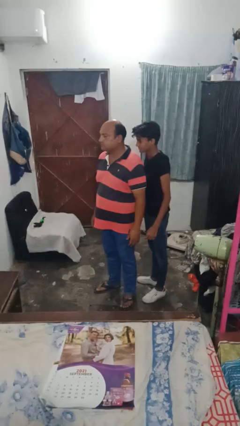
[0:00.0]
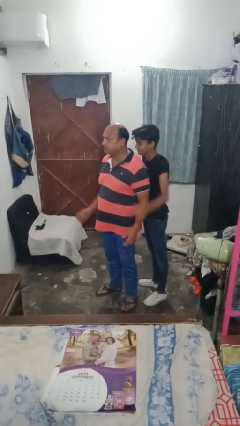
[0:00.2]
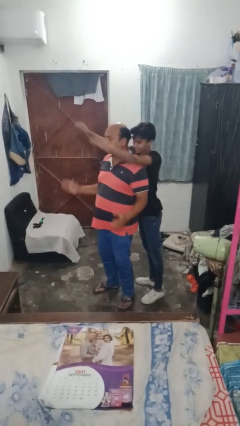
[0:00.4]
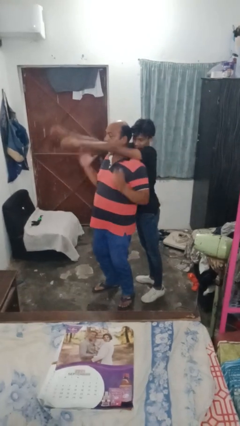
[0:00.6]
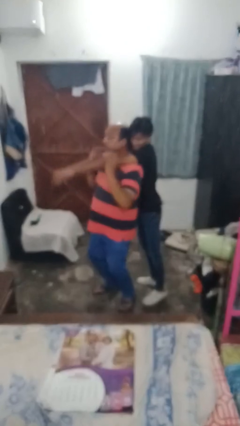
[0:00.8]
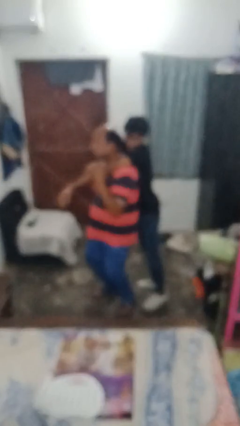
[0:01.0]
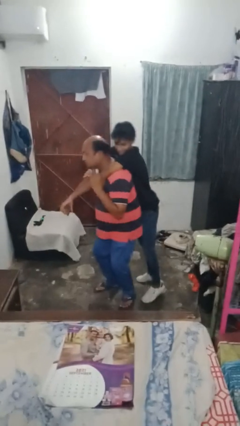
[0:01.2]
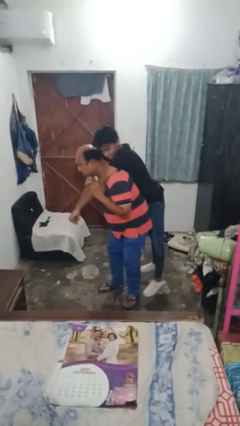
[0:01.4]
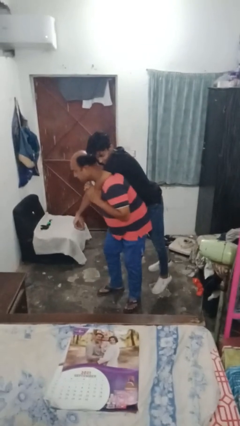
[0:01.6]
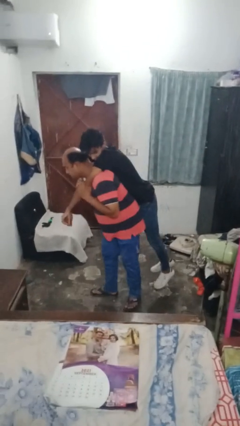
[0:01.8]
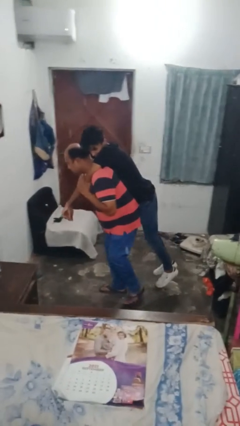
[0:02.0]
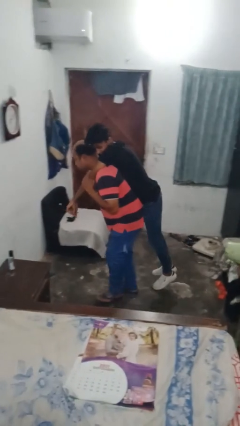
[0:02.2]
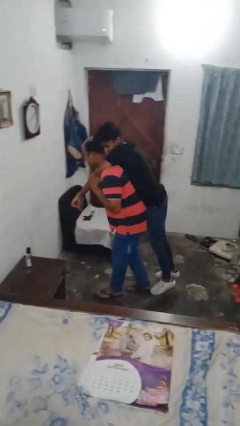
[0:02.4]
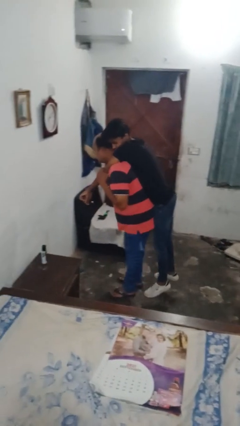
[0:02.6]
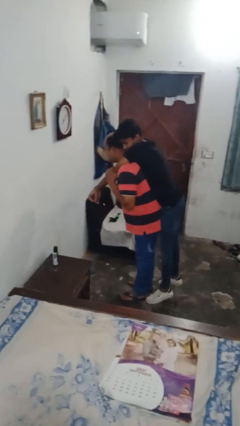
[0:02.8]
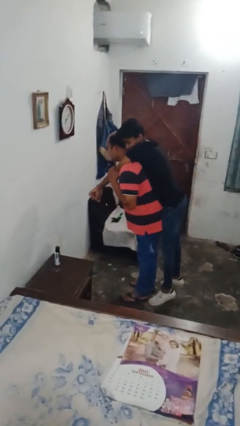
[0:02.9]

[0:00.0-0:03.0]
person carries person on back

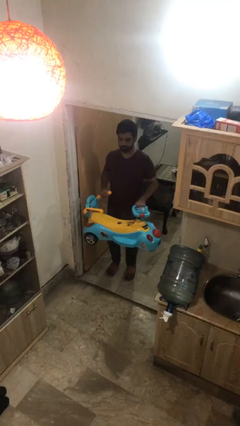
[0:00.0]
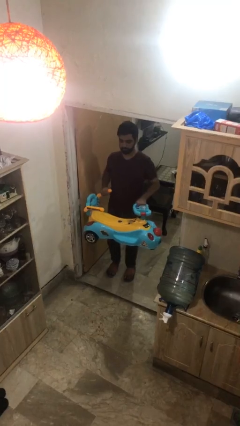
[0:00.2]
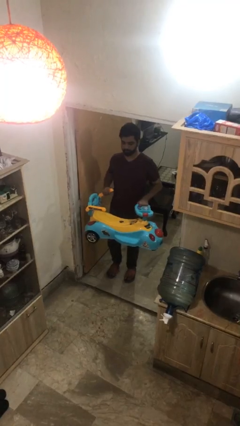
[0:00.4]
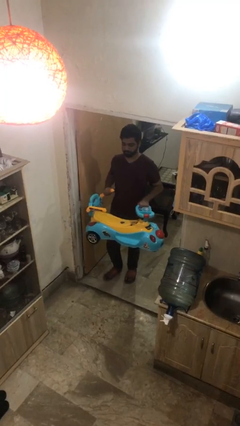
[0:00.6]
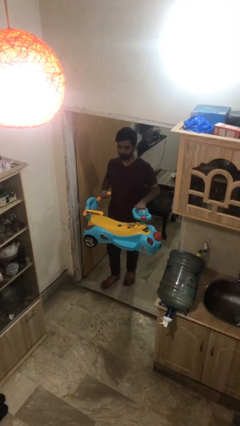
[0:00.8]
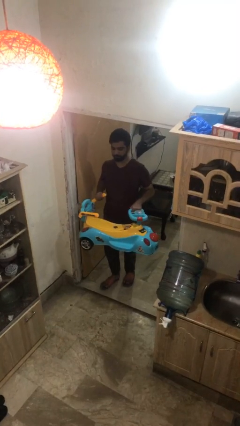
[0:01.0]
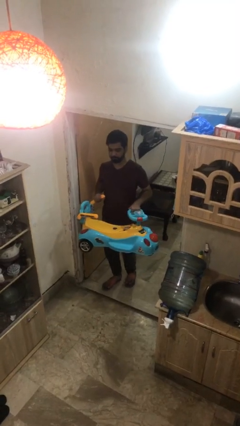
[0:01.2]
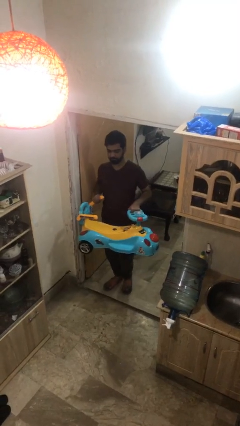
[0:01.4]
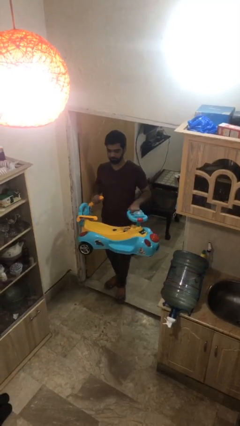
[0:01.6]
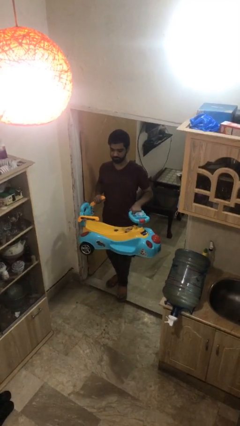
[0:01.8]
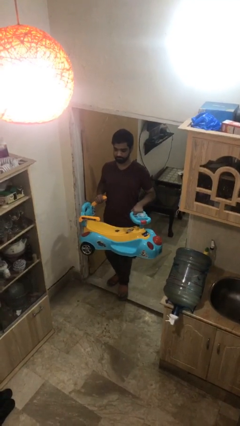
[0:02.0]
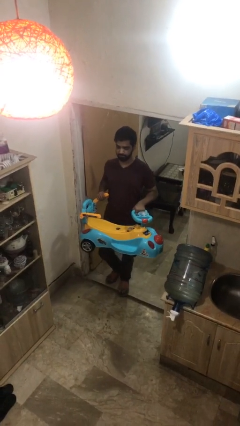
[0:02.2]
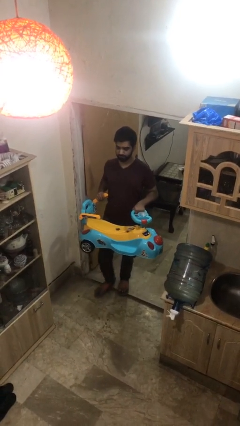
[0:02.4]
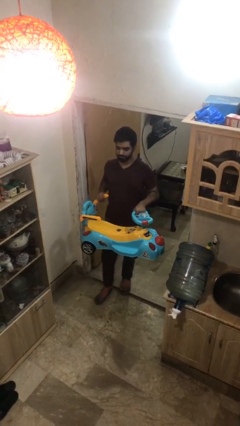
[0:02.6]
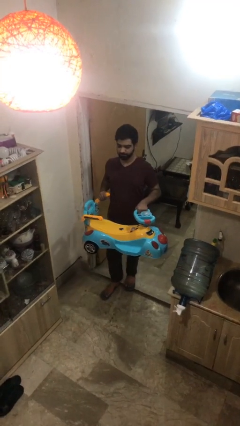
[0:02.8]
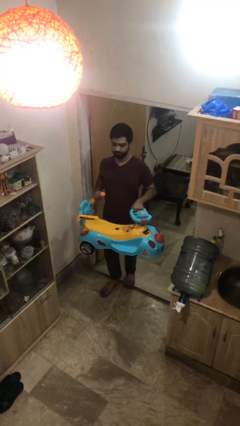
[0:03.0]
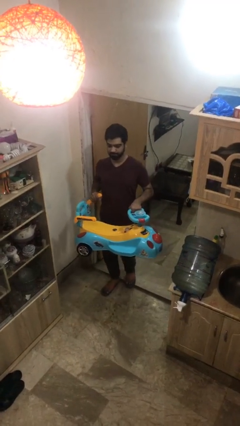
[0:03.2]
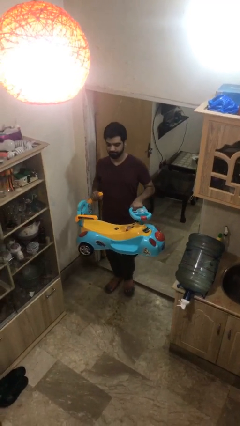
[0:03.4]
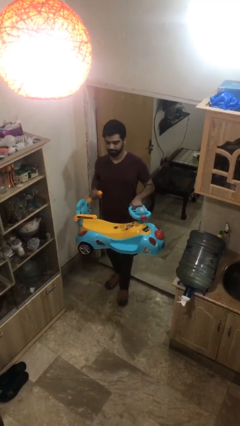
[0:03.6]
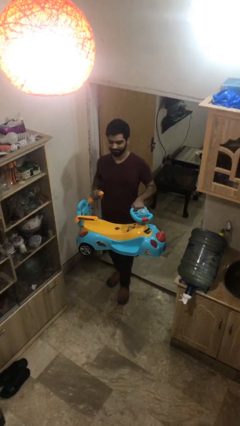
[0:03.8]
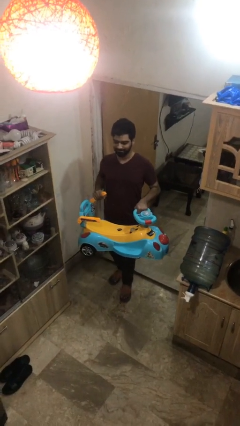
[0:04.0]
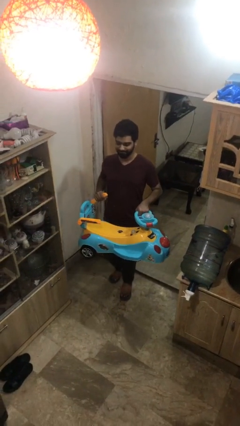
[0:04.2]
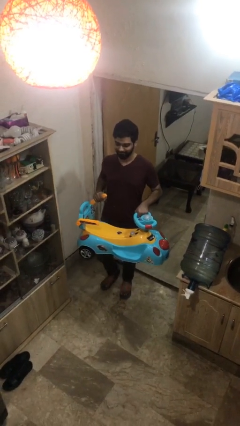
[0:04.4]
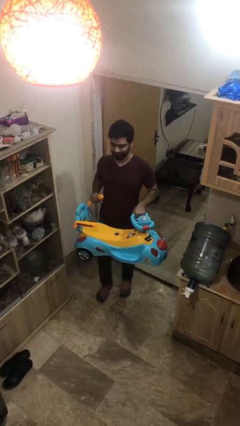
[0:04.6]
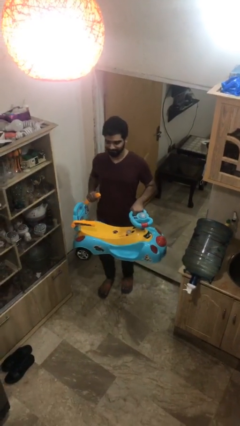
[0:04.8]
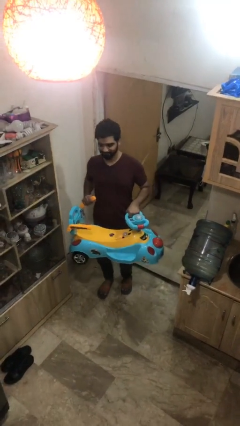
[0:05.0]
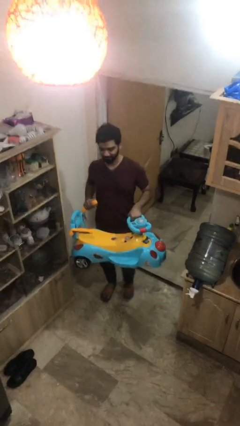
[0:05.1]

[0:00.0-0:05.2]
person carries heavy object

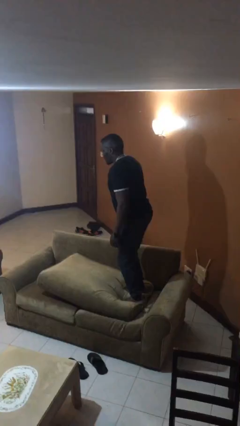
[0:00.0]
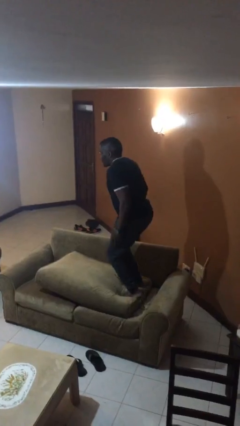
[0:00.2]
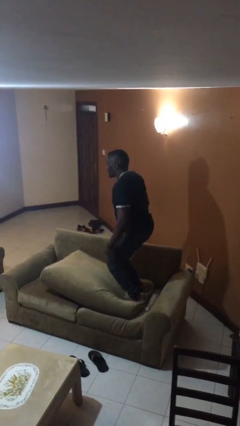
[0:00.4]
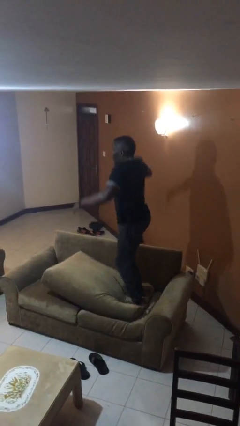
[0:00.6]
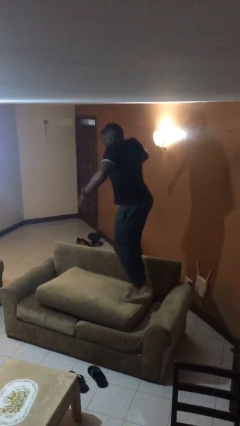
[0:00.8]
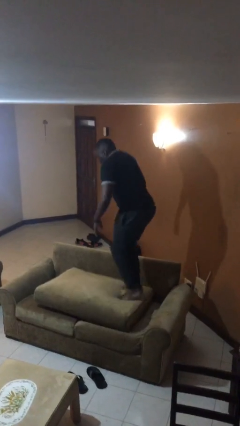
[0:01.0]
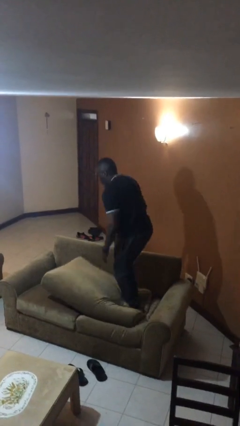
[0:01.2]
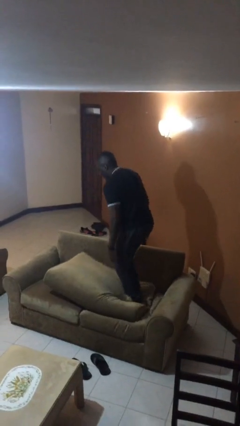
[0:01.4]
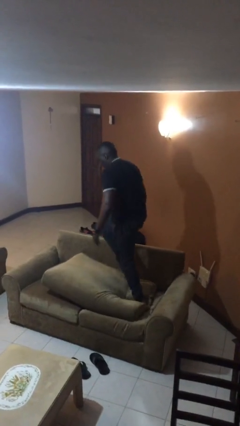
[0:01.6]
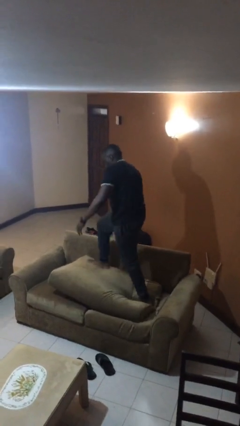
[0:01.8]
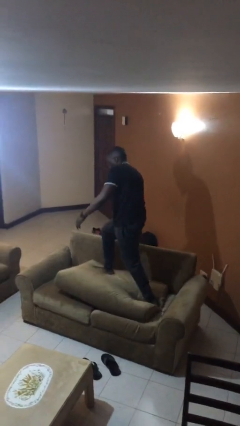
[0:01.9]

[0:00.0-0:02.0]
person jumps on couch

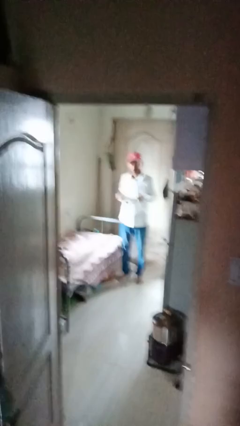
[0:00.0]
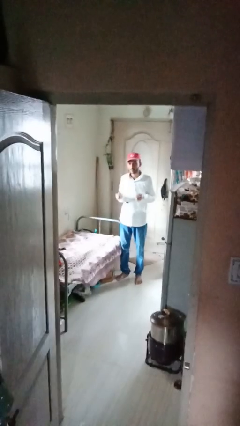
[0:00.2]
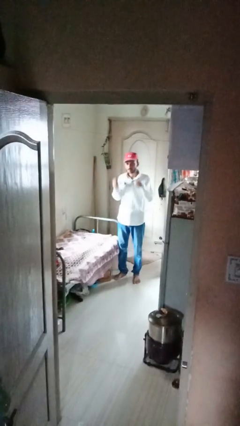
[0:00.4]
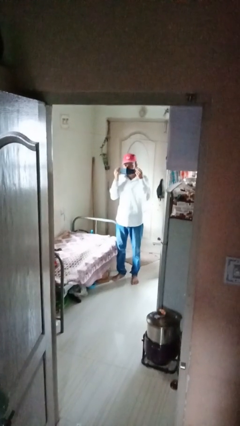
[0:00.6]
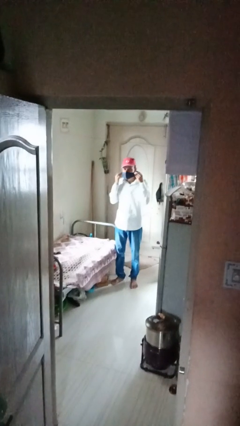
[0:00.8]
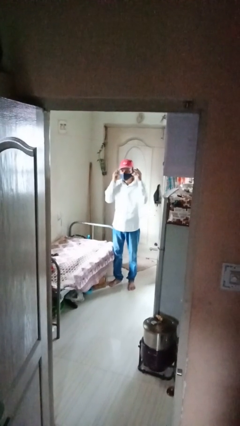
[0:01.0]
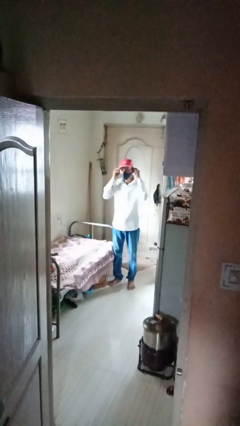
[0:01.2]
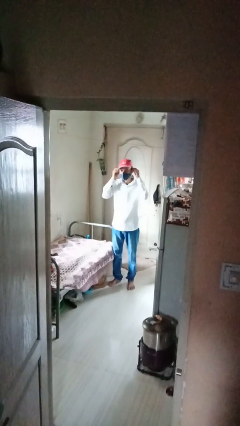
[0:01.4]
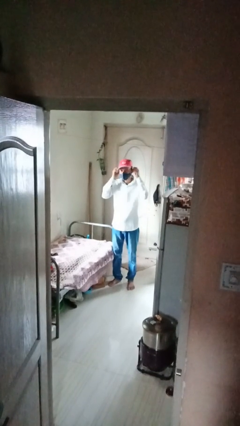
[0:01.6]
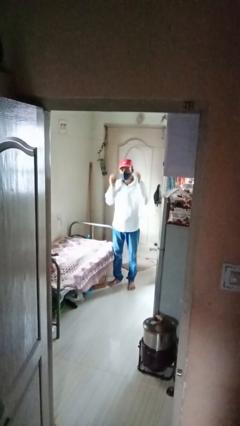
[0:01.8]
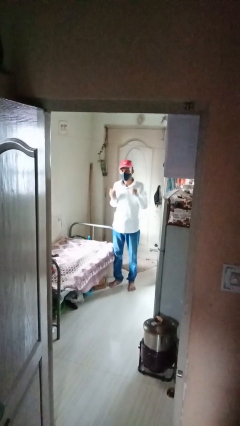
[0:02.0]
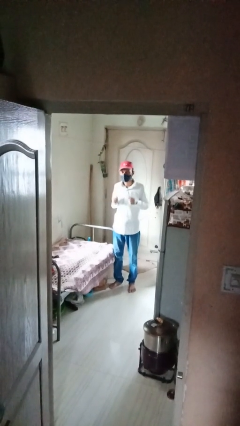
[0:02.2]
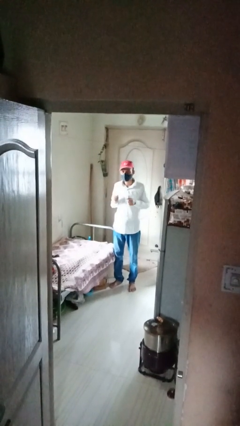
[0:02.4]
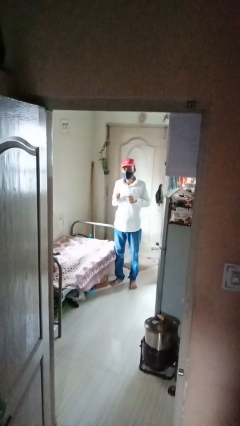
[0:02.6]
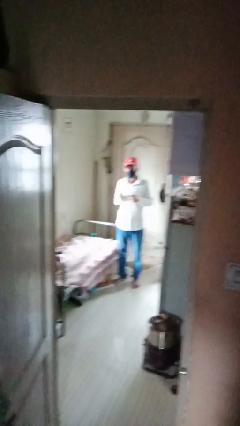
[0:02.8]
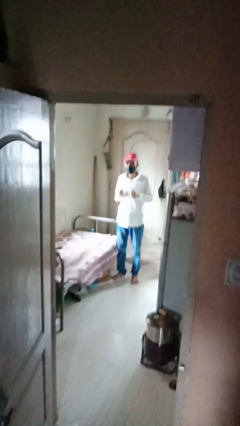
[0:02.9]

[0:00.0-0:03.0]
person puts on facemask

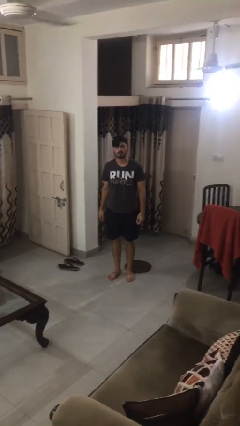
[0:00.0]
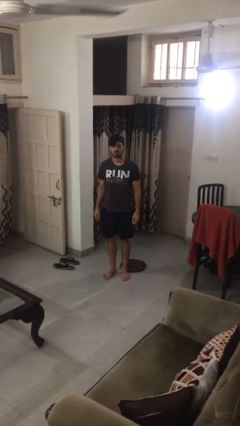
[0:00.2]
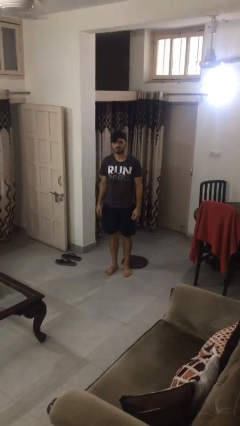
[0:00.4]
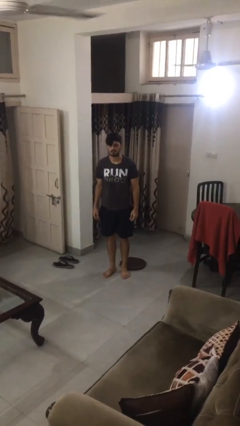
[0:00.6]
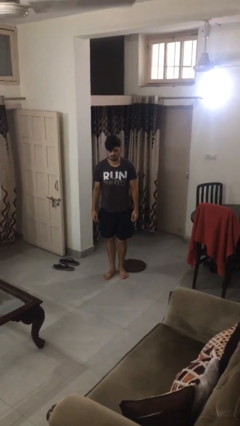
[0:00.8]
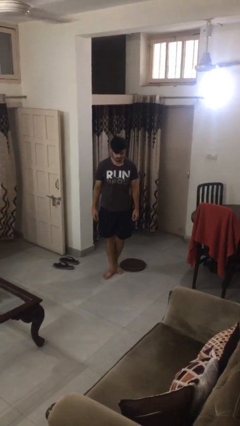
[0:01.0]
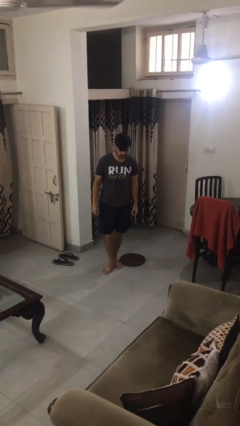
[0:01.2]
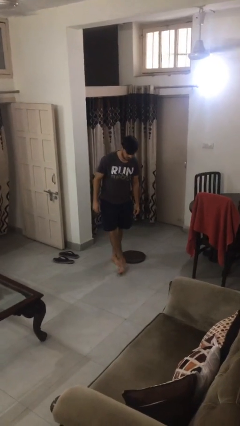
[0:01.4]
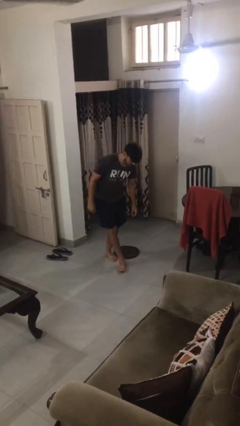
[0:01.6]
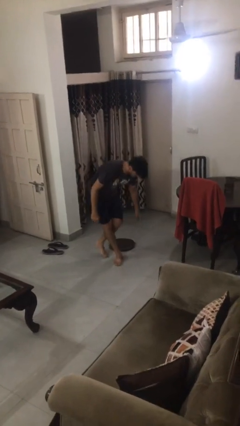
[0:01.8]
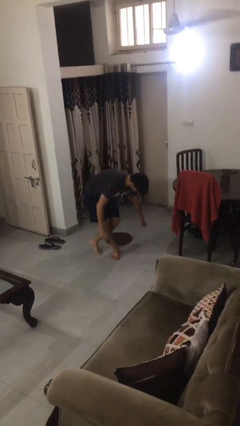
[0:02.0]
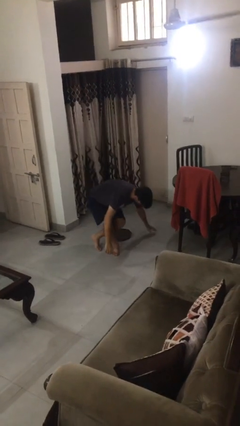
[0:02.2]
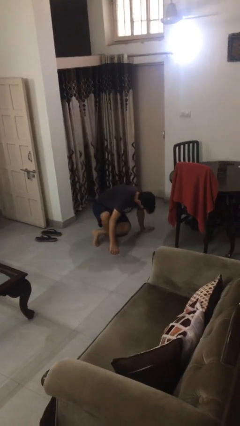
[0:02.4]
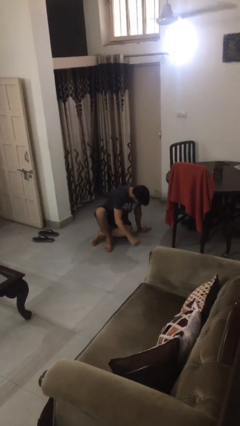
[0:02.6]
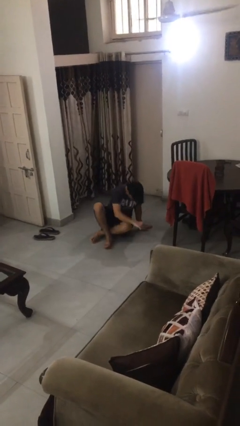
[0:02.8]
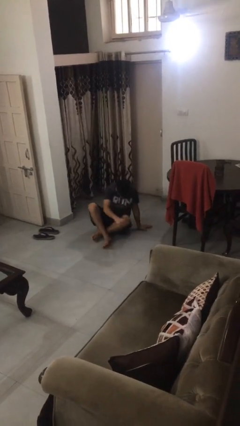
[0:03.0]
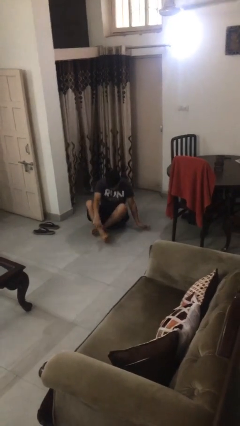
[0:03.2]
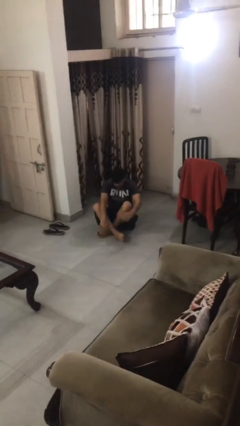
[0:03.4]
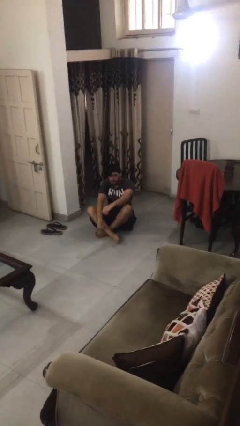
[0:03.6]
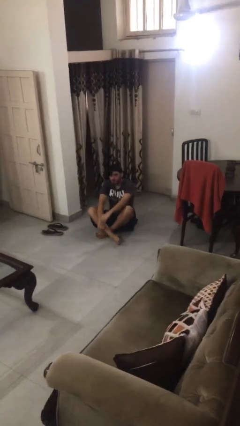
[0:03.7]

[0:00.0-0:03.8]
person sits crisscross

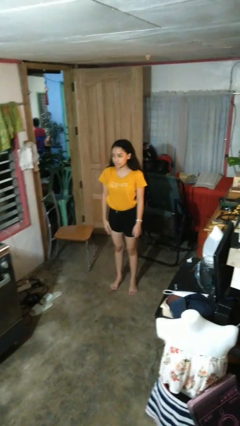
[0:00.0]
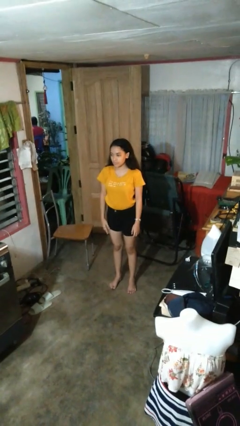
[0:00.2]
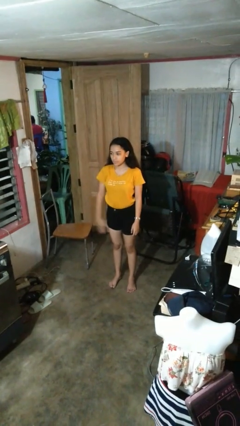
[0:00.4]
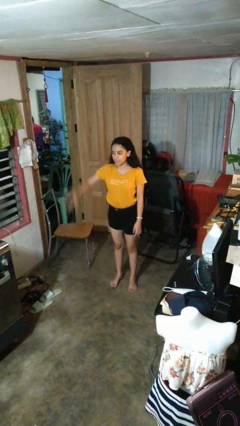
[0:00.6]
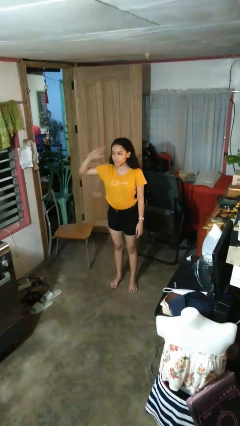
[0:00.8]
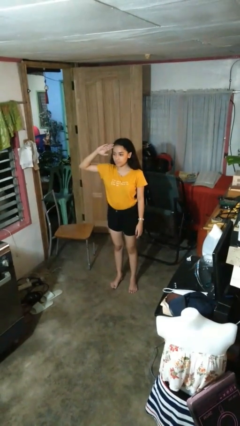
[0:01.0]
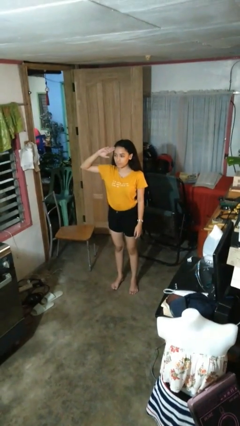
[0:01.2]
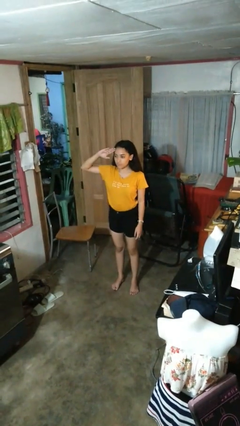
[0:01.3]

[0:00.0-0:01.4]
person salutes
